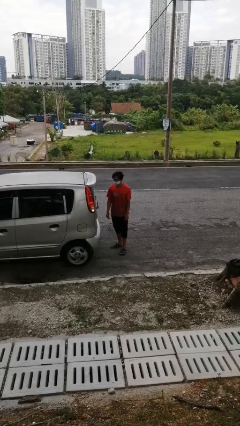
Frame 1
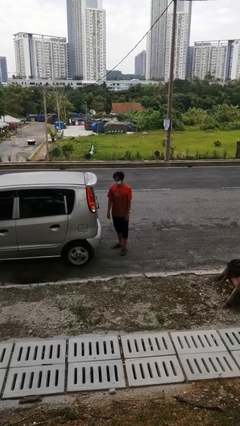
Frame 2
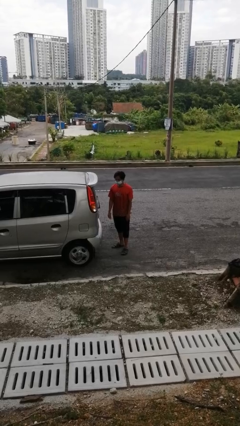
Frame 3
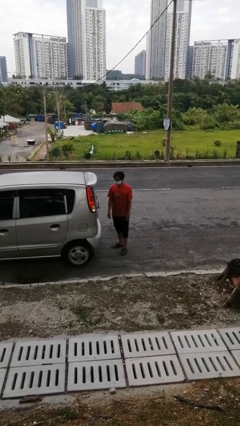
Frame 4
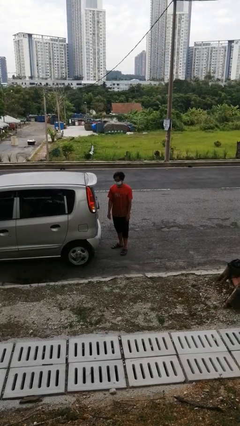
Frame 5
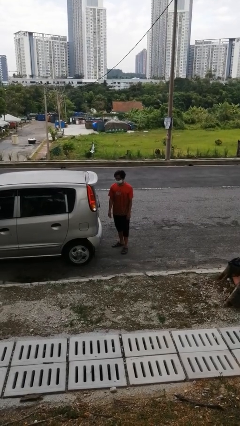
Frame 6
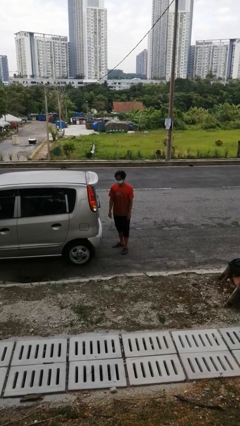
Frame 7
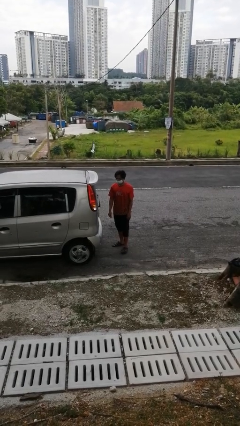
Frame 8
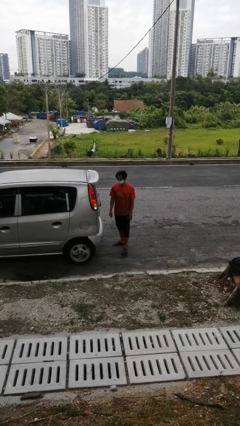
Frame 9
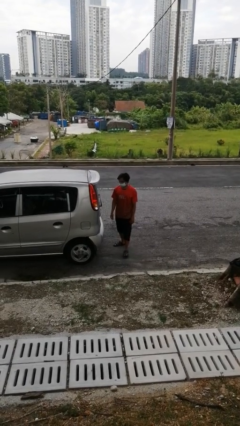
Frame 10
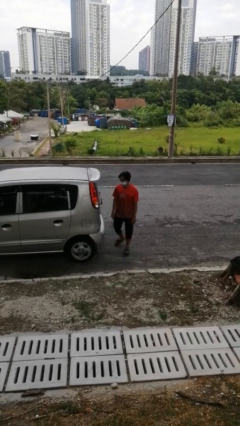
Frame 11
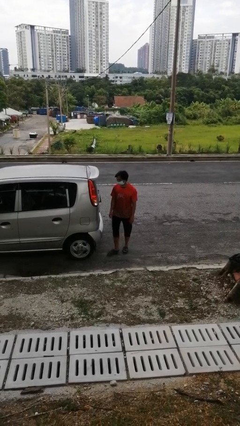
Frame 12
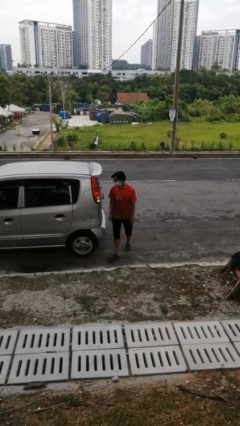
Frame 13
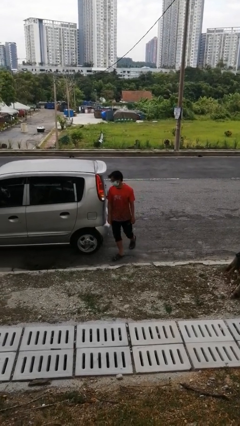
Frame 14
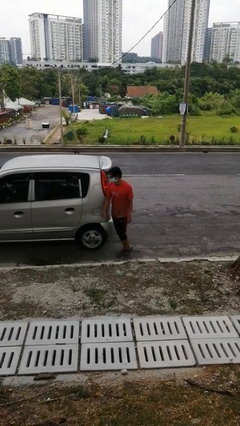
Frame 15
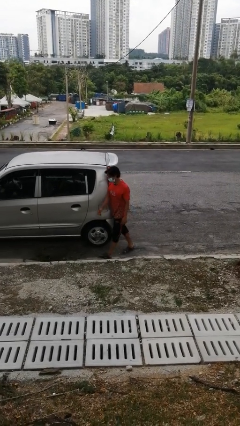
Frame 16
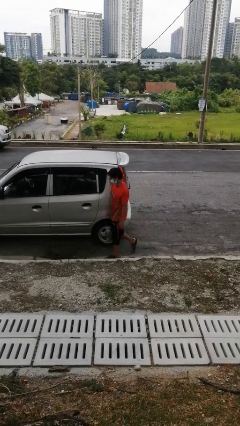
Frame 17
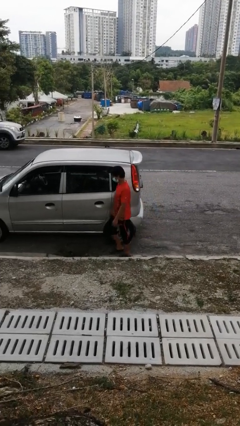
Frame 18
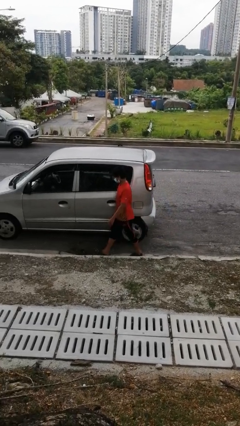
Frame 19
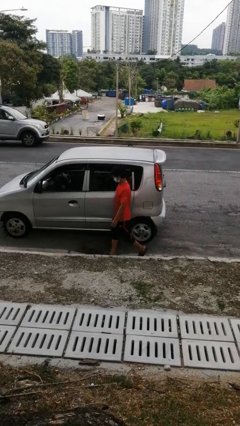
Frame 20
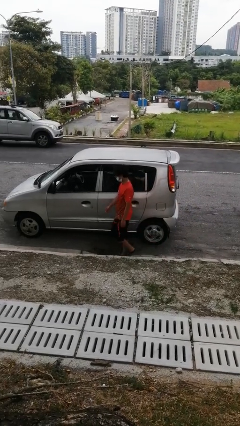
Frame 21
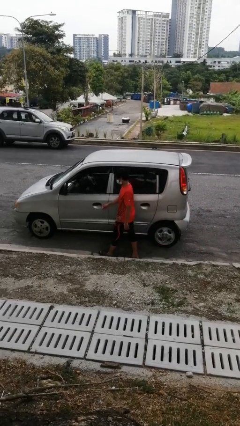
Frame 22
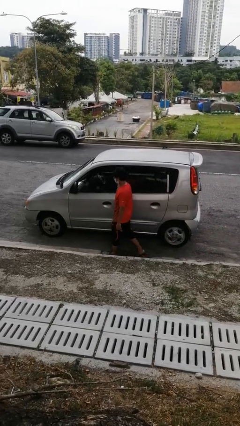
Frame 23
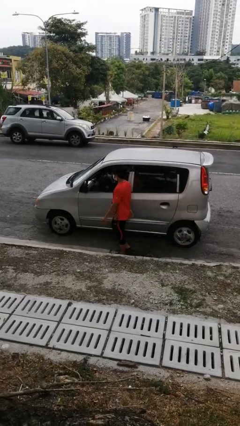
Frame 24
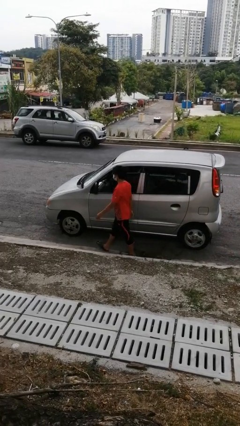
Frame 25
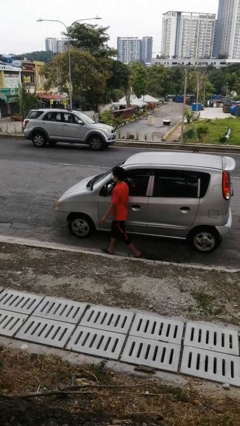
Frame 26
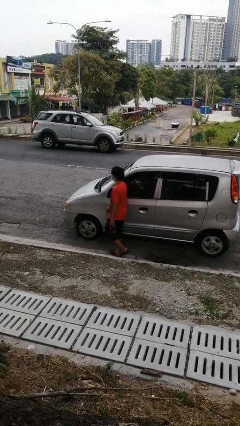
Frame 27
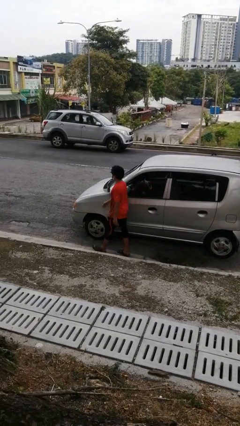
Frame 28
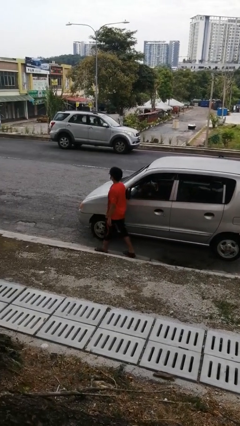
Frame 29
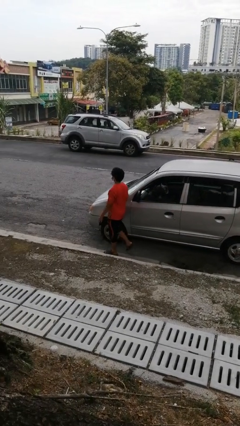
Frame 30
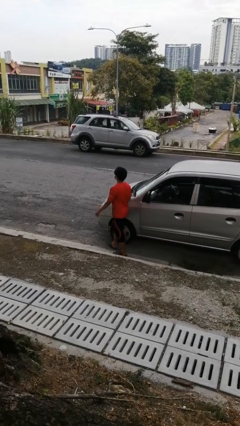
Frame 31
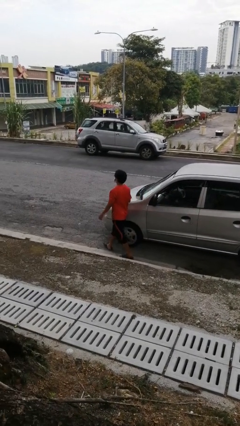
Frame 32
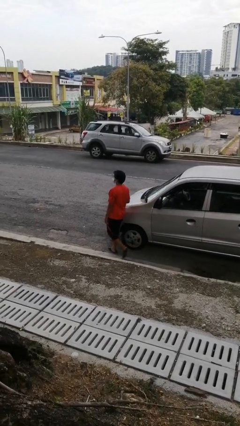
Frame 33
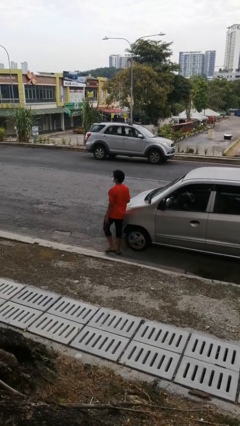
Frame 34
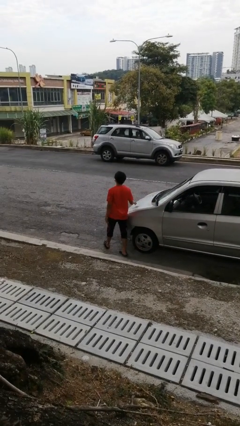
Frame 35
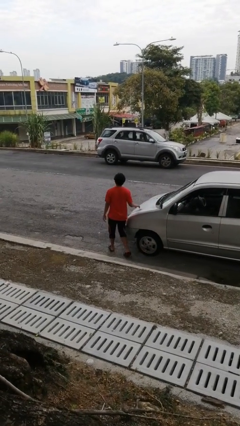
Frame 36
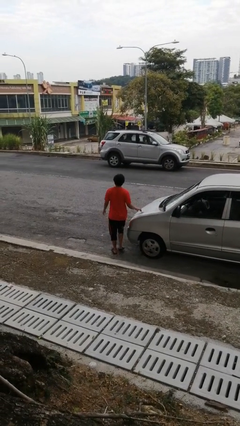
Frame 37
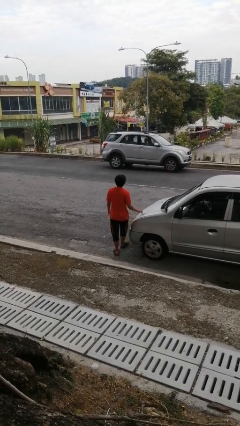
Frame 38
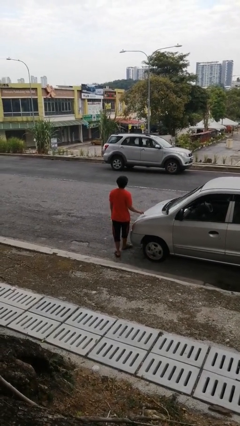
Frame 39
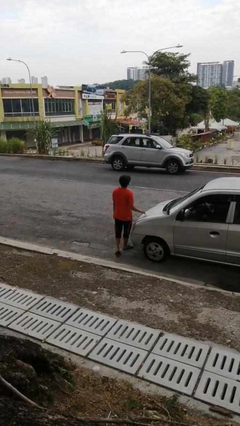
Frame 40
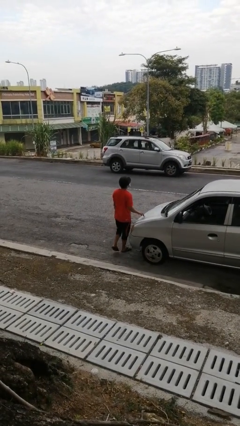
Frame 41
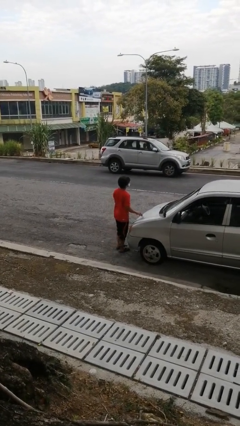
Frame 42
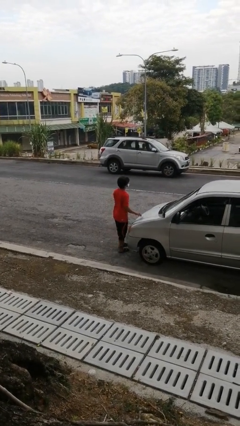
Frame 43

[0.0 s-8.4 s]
person walks around car

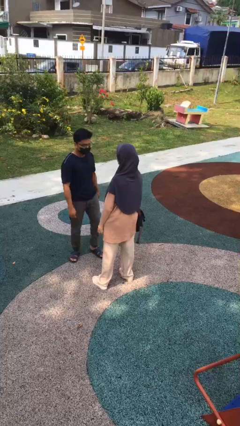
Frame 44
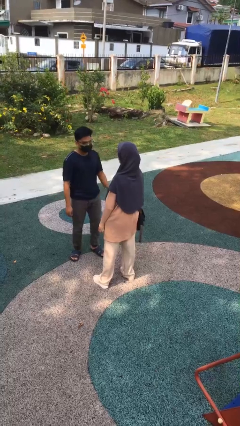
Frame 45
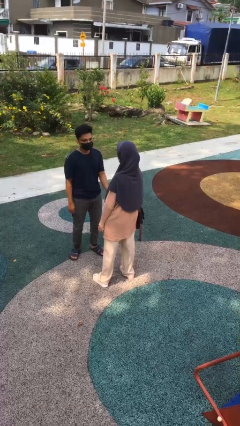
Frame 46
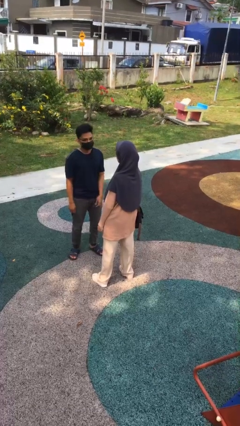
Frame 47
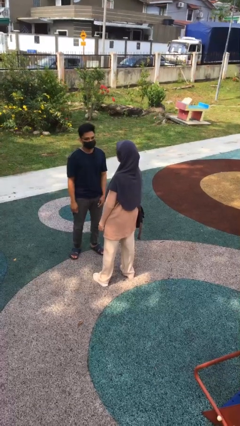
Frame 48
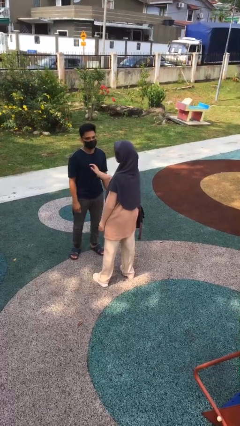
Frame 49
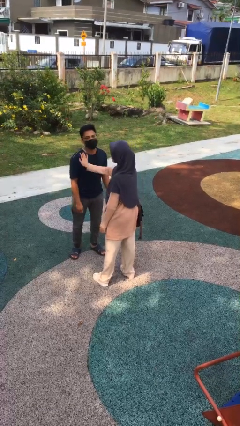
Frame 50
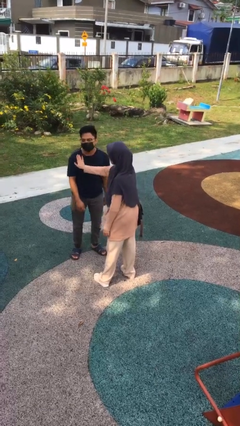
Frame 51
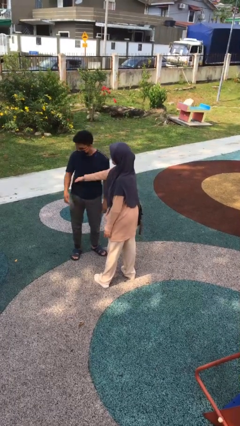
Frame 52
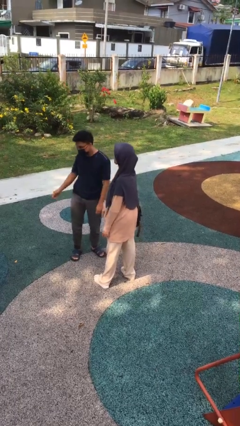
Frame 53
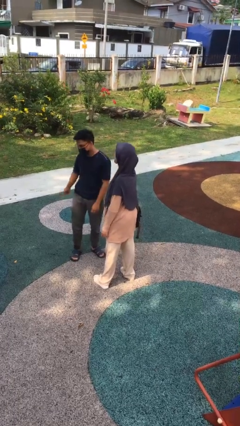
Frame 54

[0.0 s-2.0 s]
person shoves person

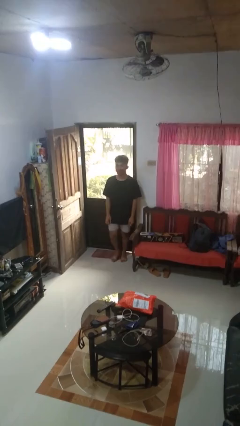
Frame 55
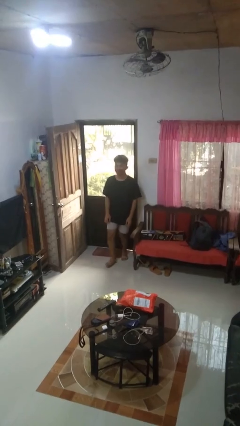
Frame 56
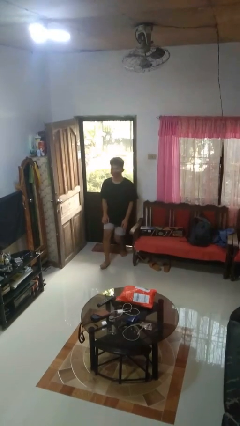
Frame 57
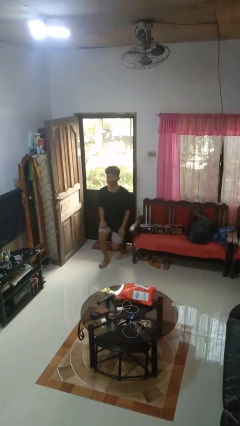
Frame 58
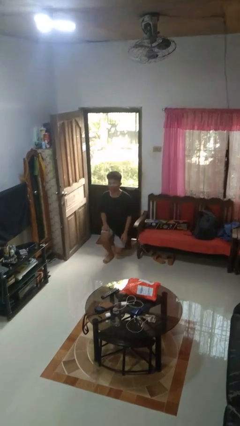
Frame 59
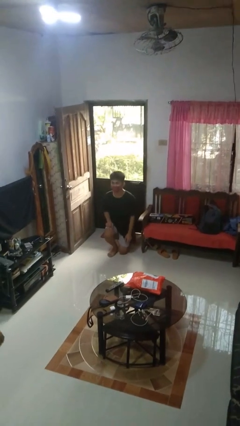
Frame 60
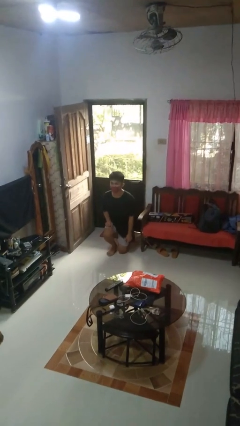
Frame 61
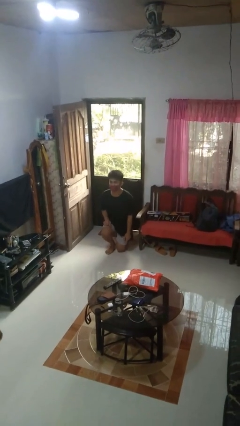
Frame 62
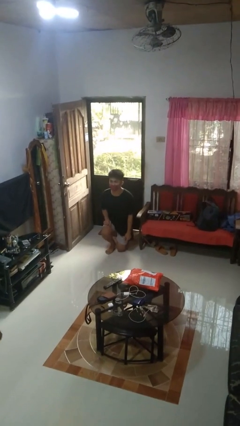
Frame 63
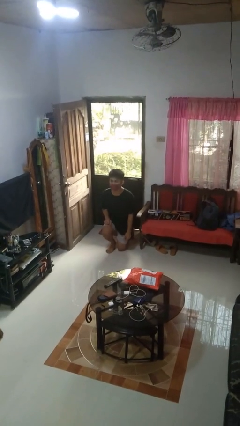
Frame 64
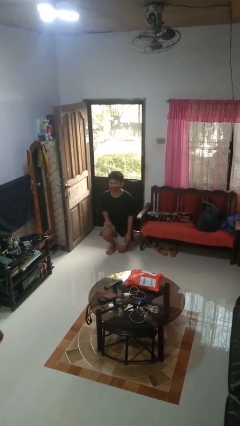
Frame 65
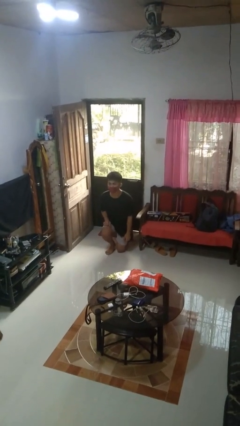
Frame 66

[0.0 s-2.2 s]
person kneels

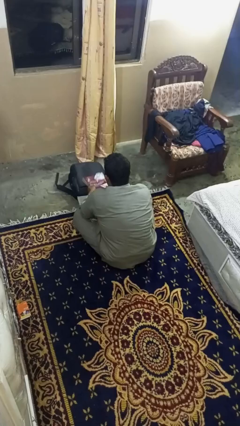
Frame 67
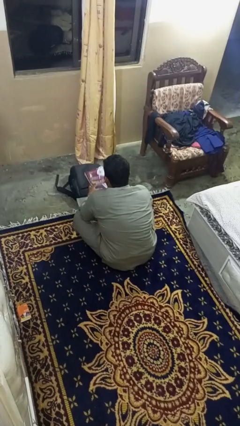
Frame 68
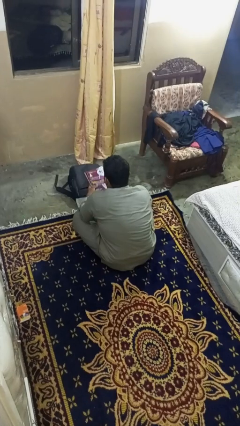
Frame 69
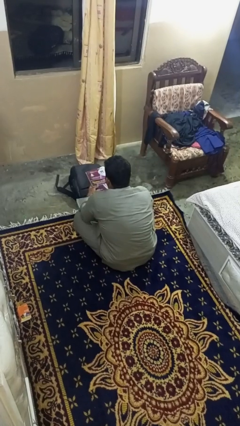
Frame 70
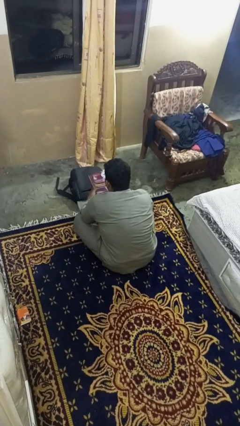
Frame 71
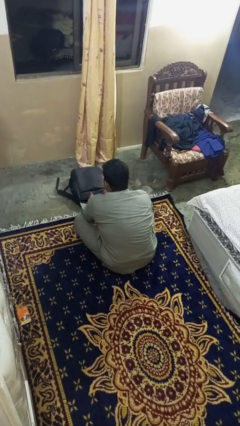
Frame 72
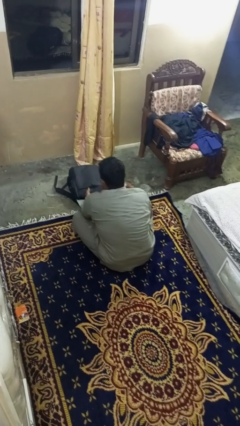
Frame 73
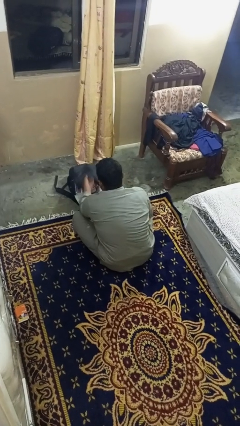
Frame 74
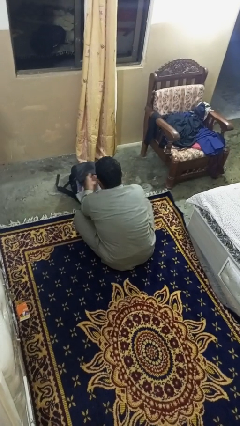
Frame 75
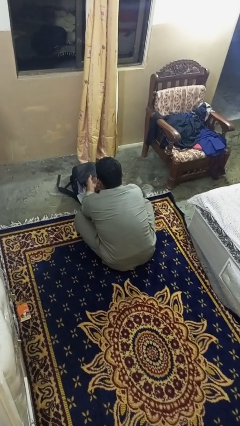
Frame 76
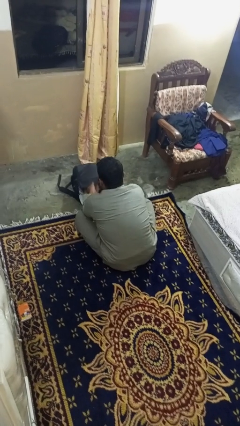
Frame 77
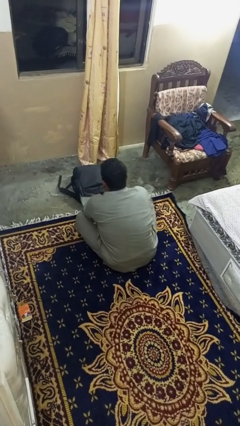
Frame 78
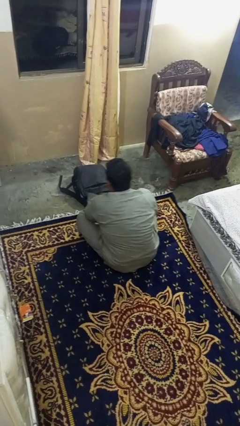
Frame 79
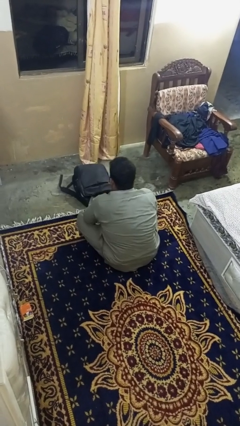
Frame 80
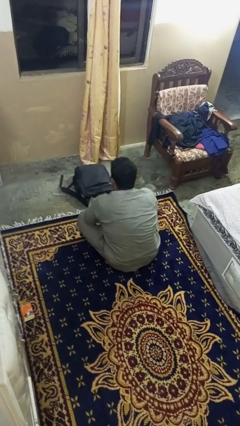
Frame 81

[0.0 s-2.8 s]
person puts object into bag

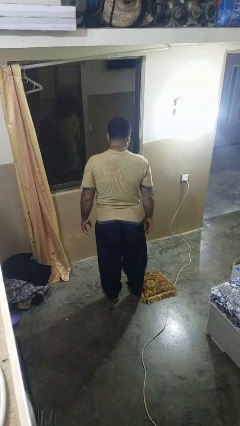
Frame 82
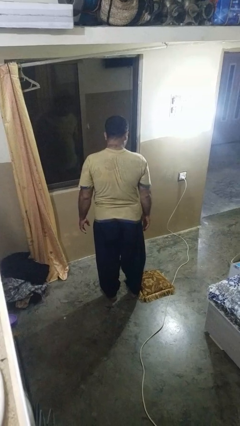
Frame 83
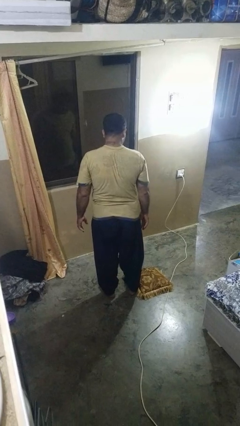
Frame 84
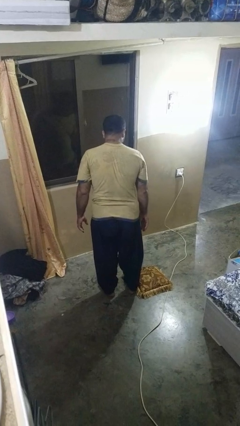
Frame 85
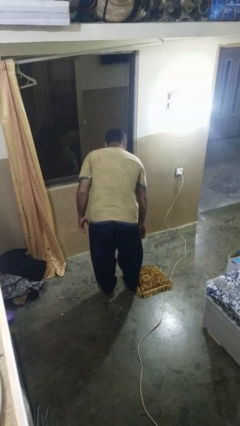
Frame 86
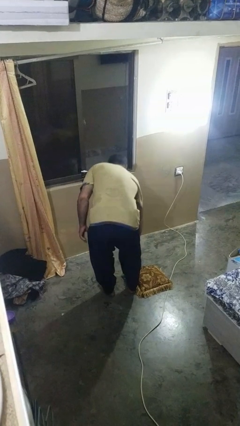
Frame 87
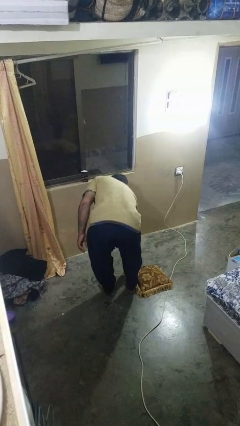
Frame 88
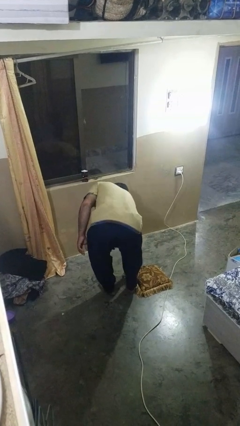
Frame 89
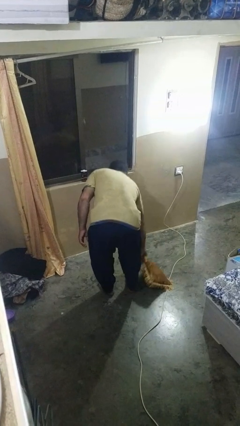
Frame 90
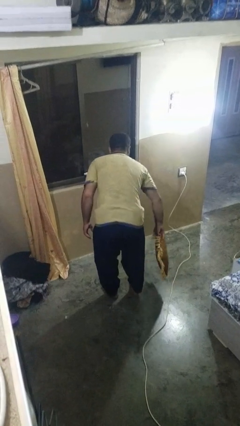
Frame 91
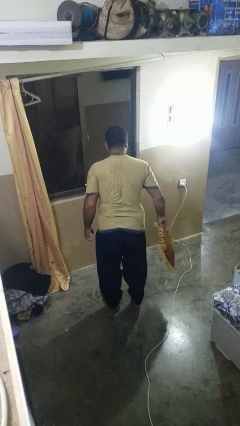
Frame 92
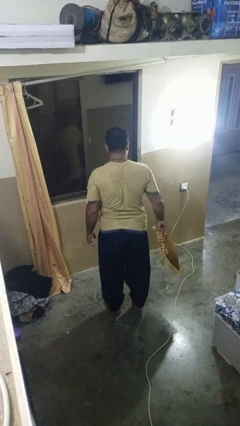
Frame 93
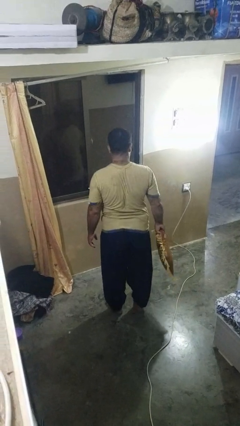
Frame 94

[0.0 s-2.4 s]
person picks up object from floor
